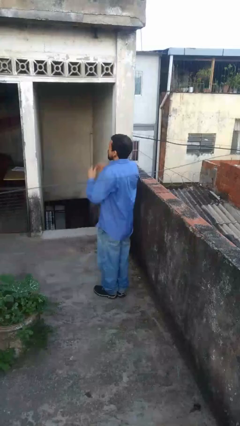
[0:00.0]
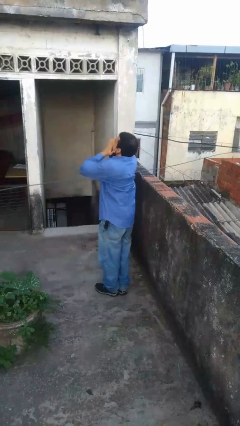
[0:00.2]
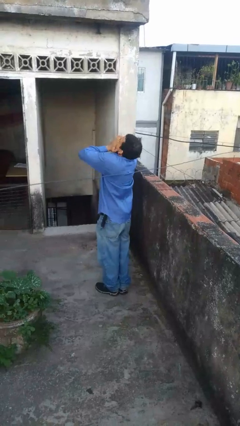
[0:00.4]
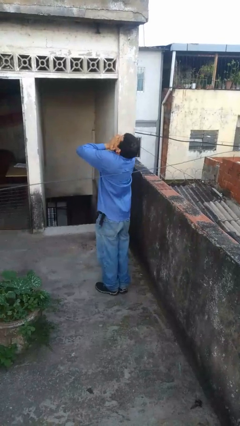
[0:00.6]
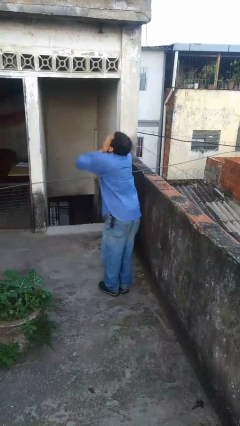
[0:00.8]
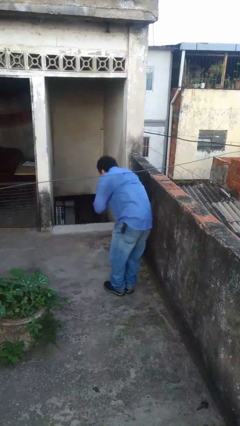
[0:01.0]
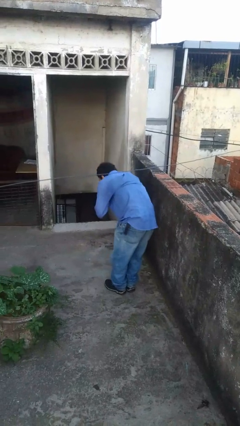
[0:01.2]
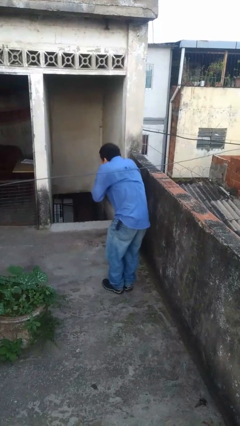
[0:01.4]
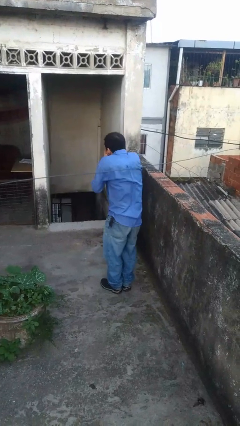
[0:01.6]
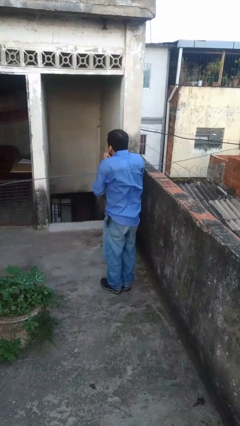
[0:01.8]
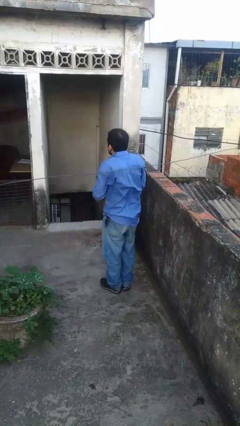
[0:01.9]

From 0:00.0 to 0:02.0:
person sneezes into hand

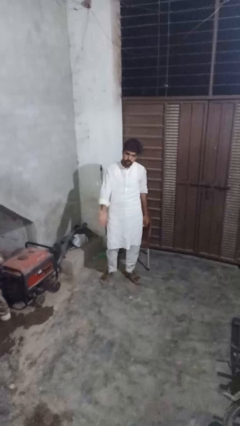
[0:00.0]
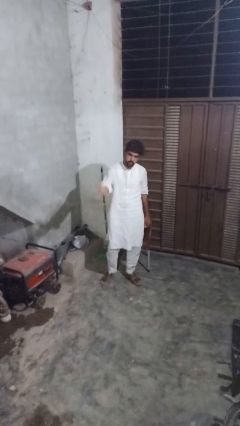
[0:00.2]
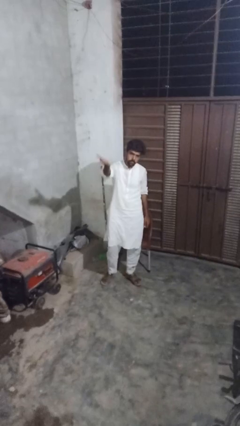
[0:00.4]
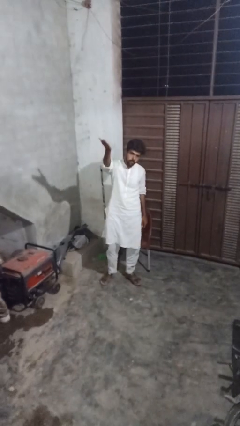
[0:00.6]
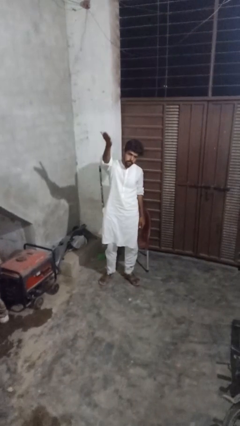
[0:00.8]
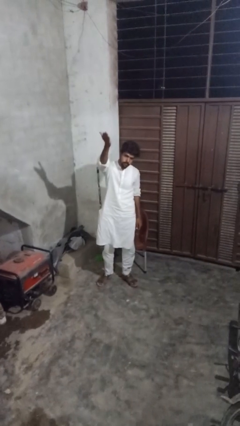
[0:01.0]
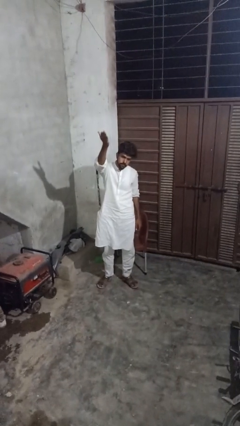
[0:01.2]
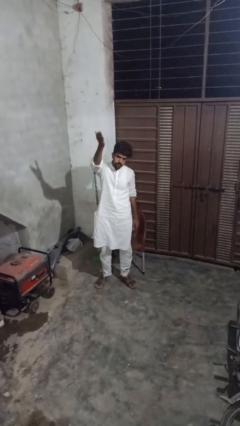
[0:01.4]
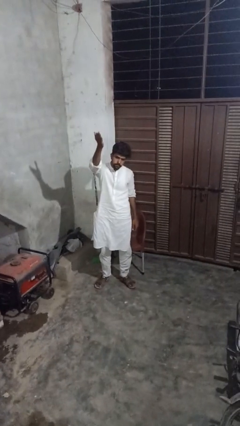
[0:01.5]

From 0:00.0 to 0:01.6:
person gestures swipe up

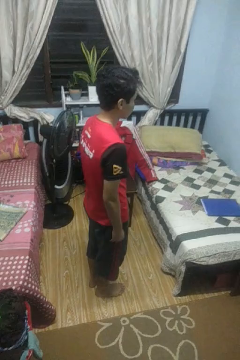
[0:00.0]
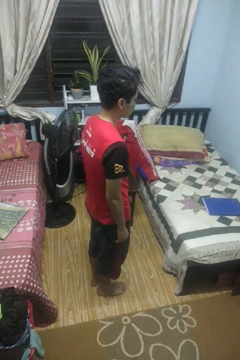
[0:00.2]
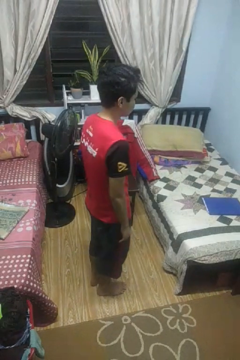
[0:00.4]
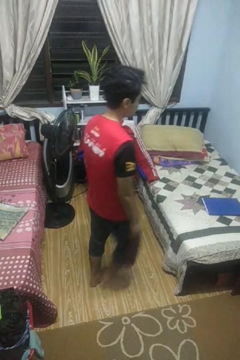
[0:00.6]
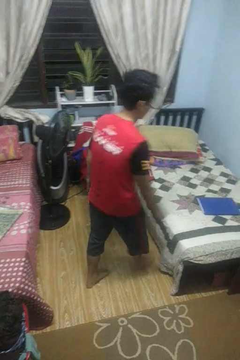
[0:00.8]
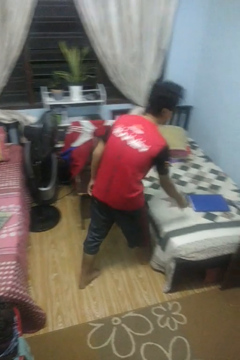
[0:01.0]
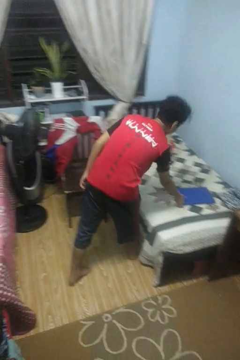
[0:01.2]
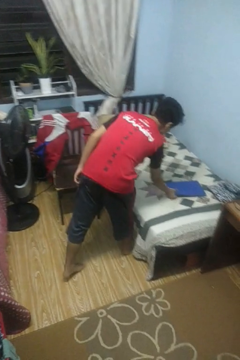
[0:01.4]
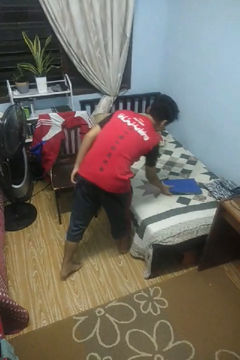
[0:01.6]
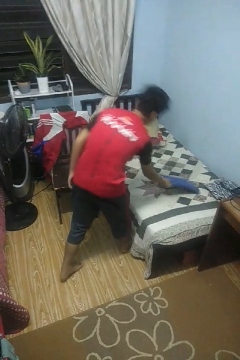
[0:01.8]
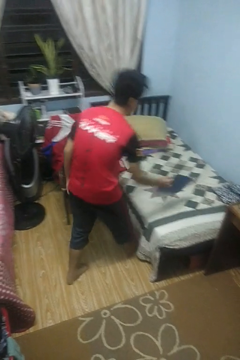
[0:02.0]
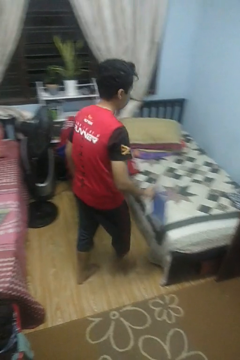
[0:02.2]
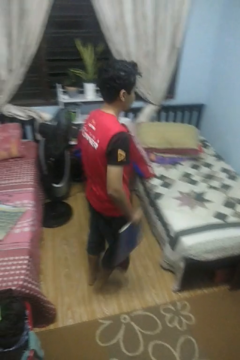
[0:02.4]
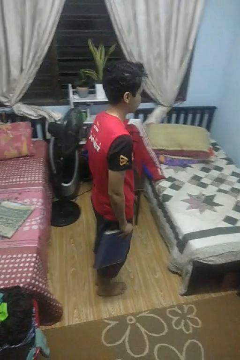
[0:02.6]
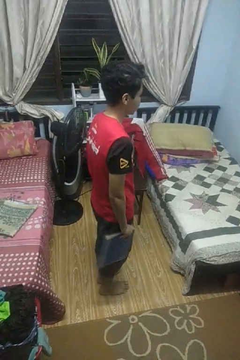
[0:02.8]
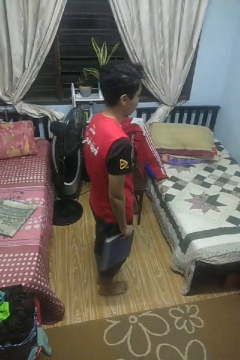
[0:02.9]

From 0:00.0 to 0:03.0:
person picks up object from bed

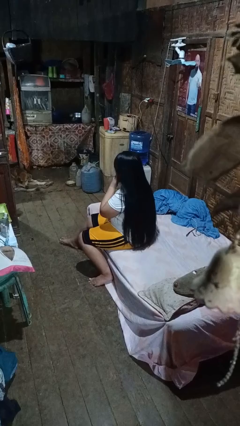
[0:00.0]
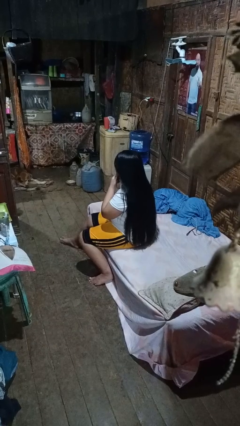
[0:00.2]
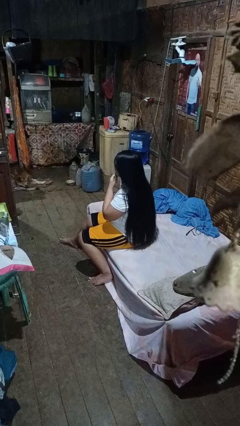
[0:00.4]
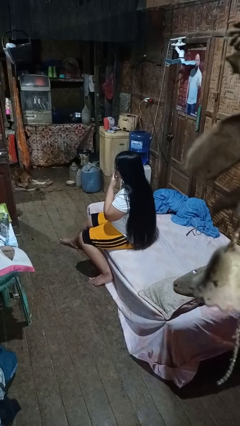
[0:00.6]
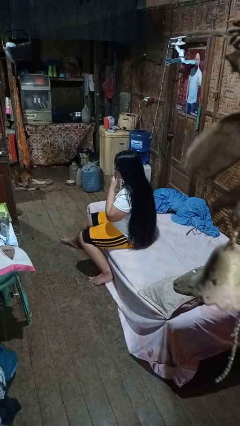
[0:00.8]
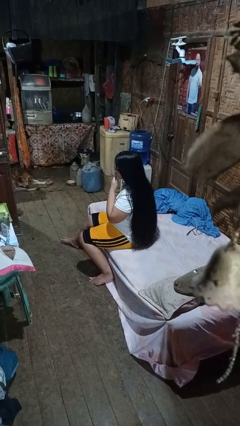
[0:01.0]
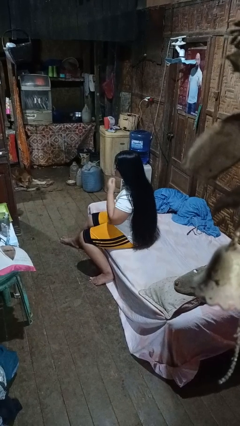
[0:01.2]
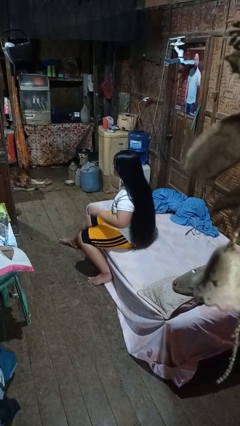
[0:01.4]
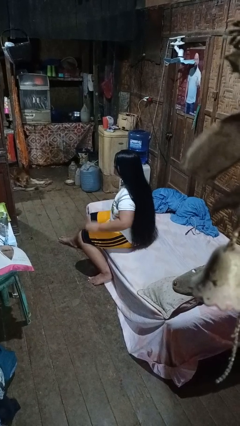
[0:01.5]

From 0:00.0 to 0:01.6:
person strokes chin

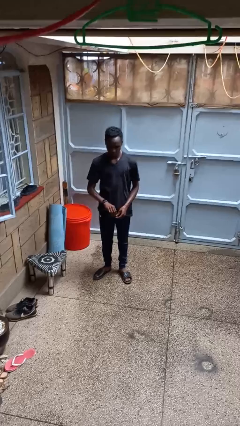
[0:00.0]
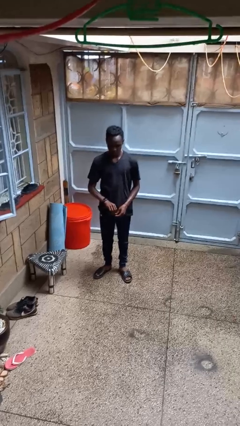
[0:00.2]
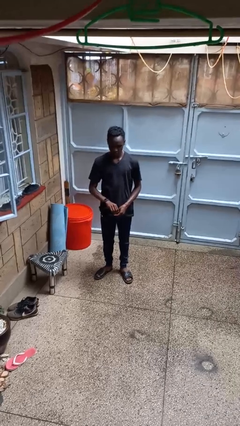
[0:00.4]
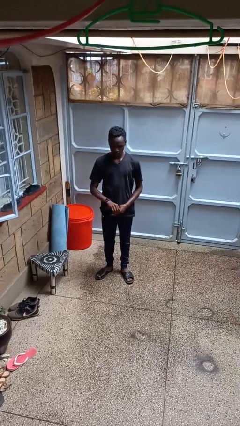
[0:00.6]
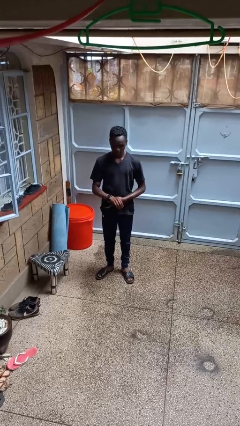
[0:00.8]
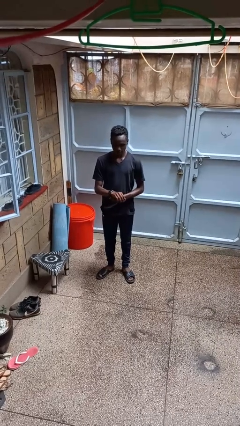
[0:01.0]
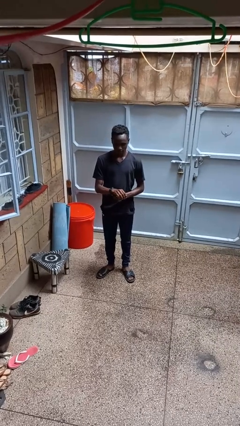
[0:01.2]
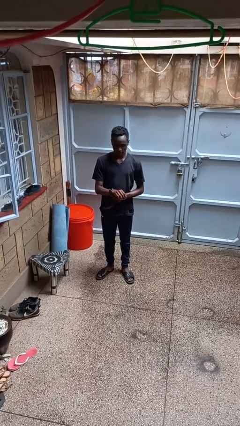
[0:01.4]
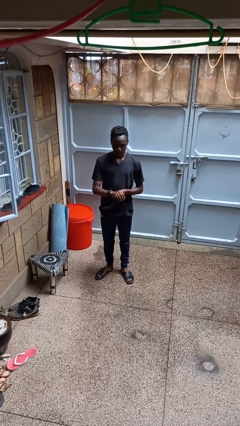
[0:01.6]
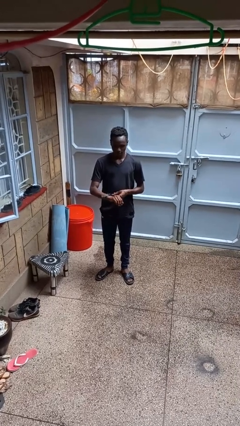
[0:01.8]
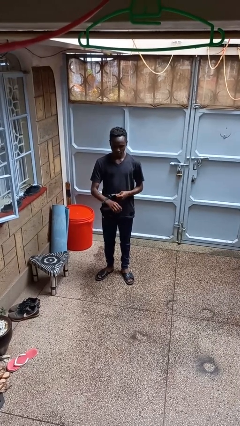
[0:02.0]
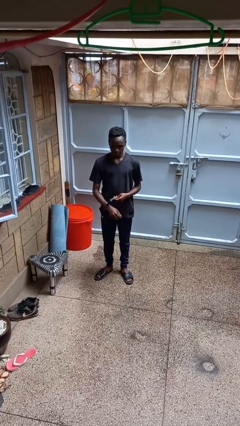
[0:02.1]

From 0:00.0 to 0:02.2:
person takes off wristwatch

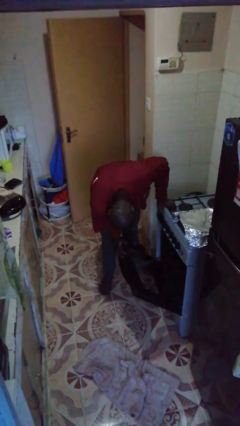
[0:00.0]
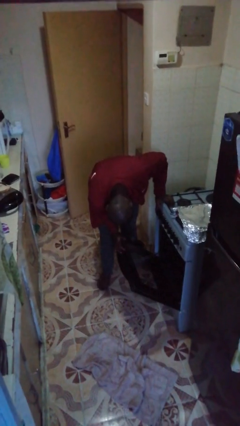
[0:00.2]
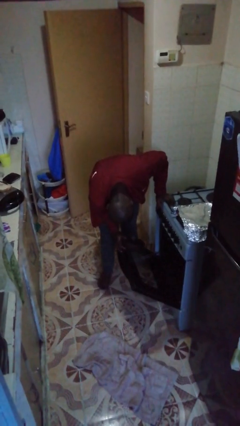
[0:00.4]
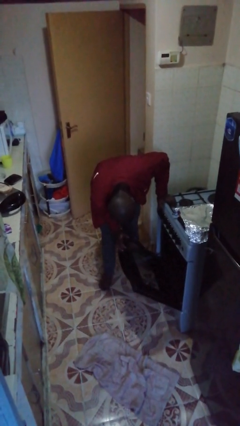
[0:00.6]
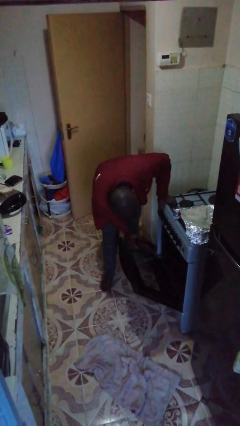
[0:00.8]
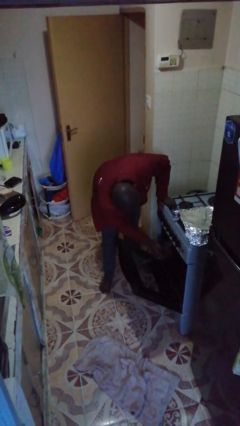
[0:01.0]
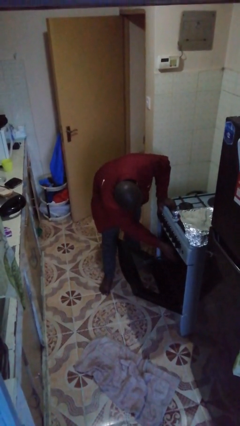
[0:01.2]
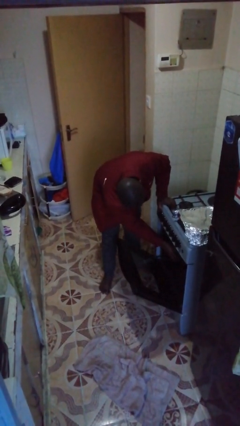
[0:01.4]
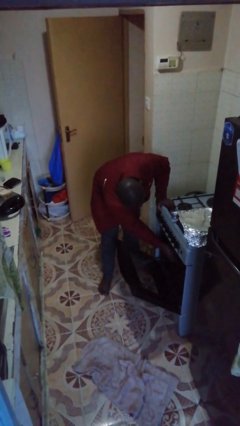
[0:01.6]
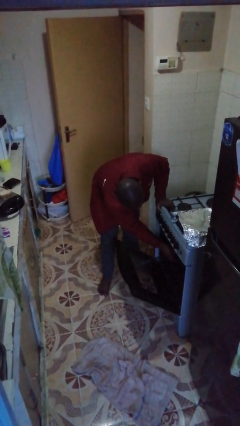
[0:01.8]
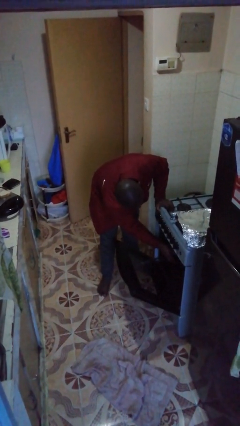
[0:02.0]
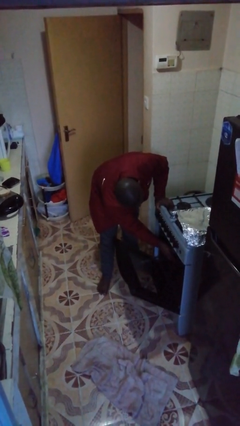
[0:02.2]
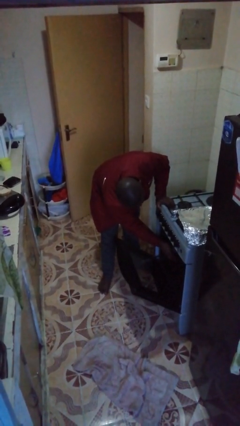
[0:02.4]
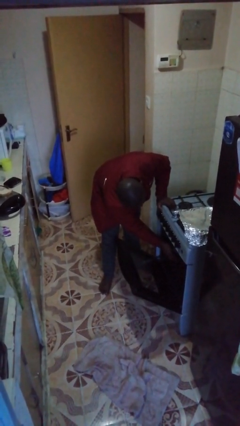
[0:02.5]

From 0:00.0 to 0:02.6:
person puts object into oven

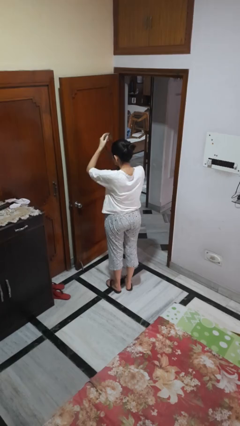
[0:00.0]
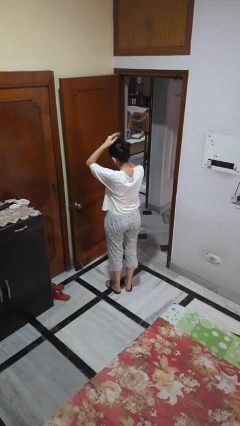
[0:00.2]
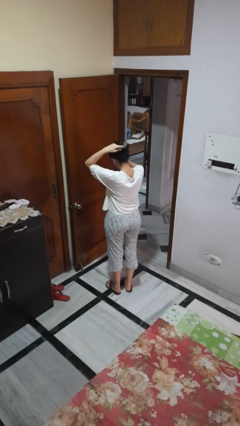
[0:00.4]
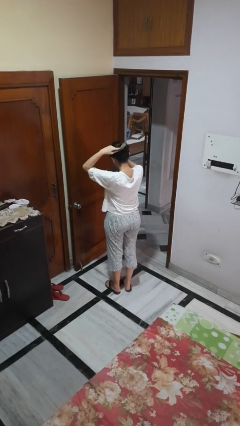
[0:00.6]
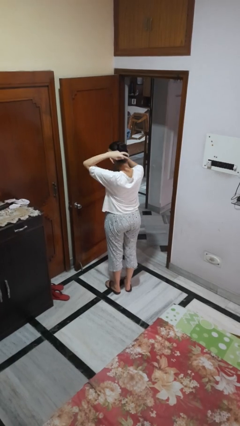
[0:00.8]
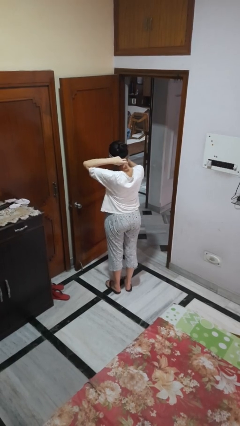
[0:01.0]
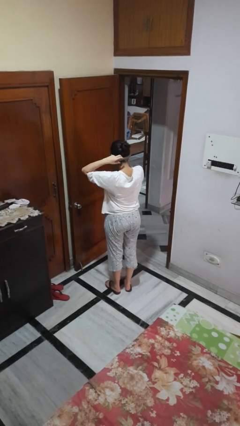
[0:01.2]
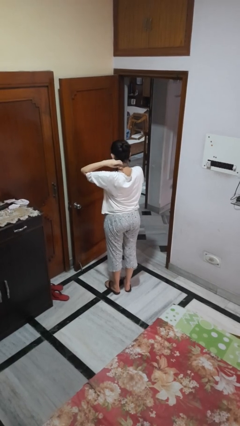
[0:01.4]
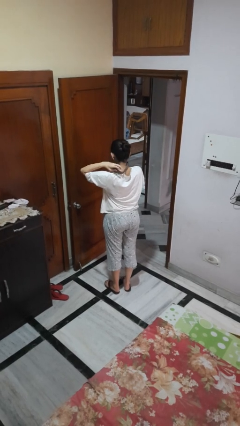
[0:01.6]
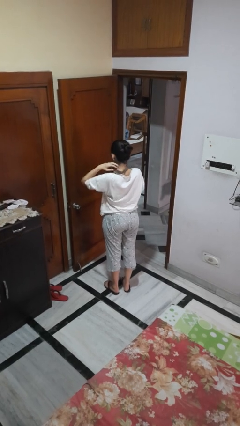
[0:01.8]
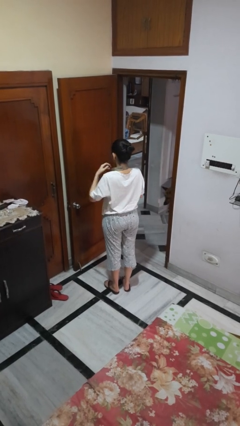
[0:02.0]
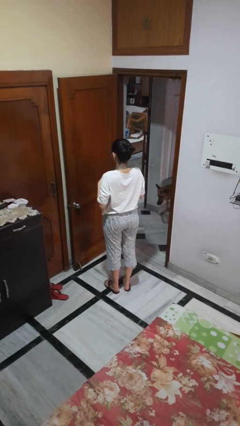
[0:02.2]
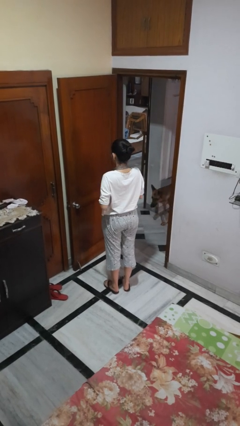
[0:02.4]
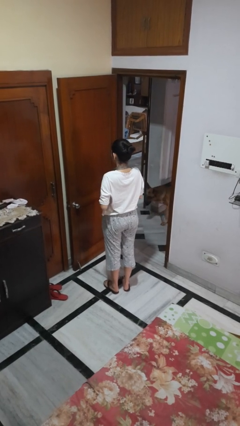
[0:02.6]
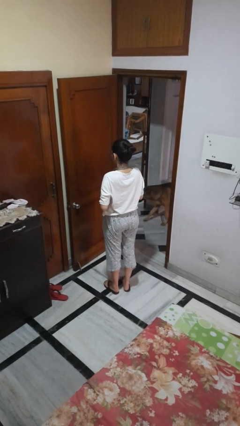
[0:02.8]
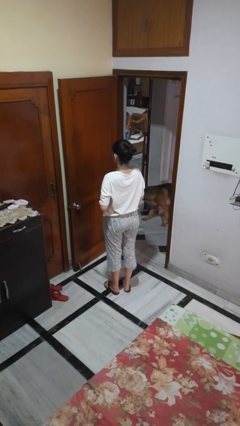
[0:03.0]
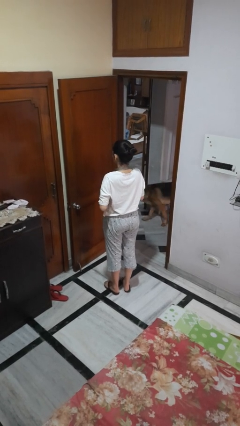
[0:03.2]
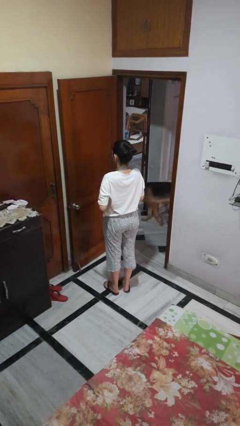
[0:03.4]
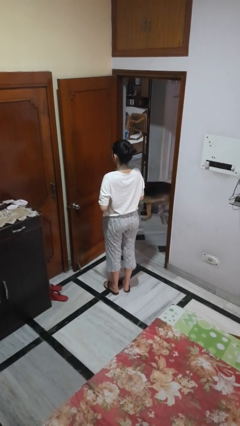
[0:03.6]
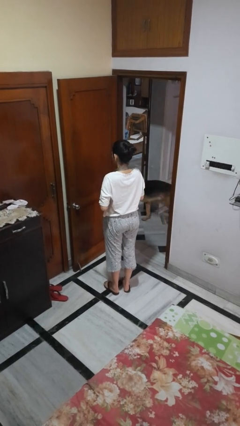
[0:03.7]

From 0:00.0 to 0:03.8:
person puts on necktie

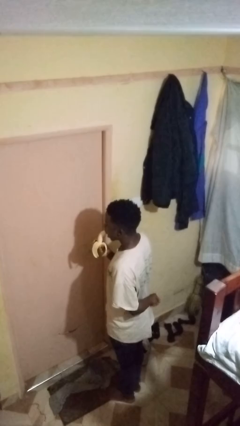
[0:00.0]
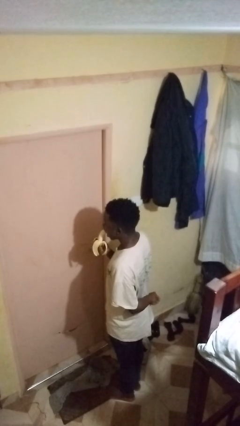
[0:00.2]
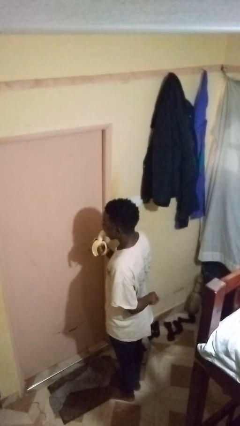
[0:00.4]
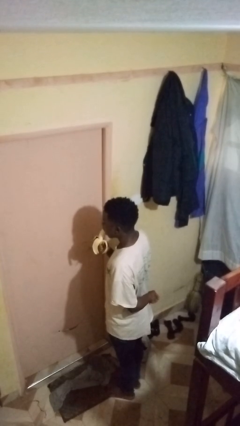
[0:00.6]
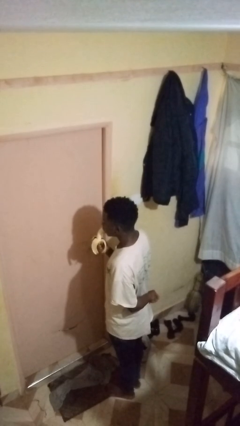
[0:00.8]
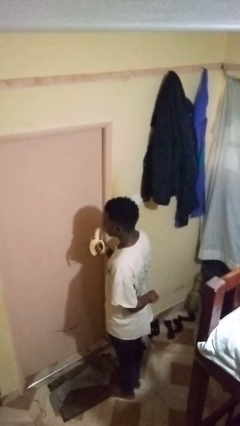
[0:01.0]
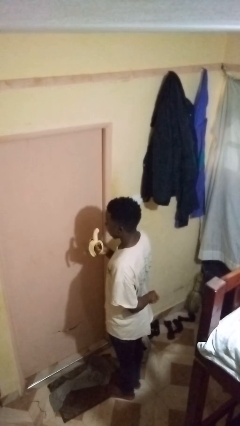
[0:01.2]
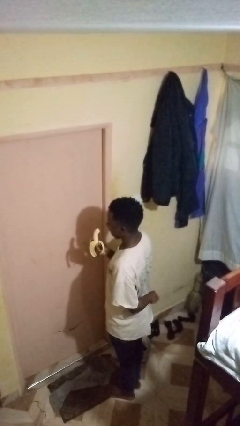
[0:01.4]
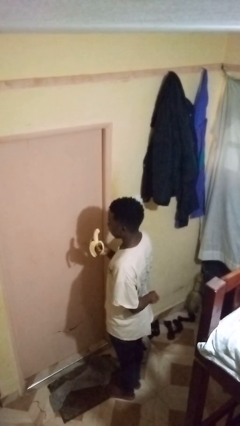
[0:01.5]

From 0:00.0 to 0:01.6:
person eats banana
